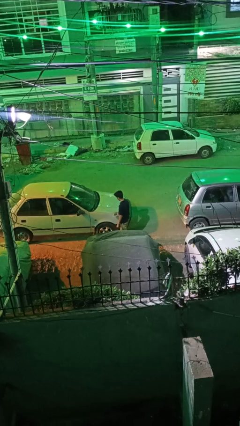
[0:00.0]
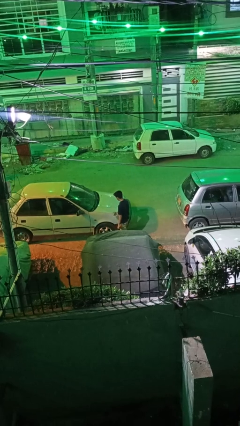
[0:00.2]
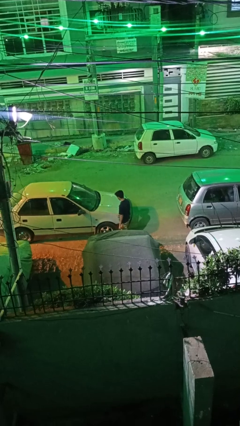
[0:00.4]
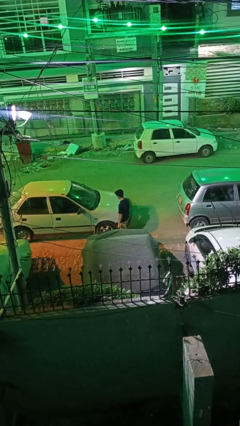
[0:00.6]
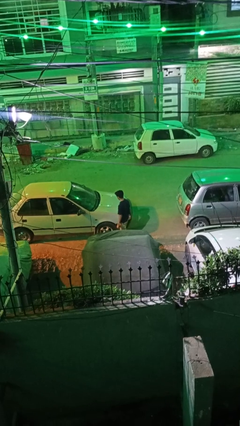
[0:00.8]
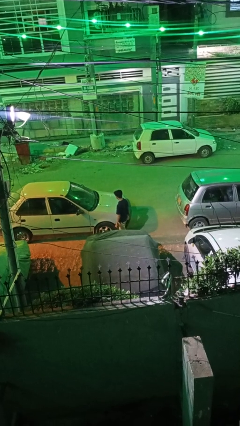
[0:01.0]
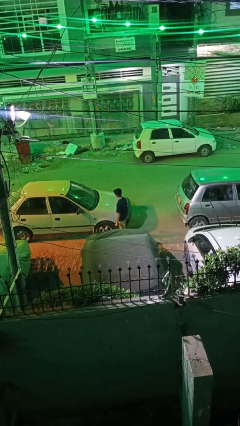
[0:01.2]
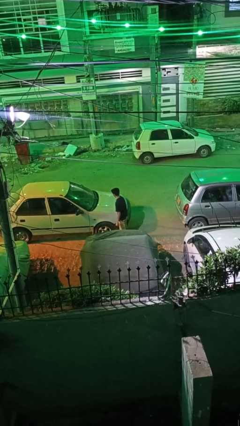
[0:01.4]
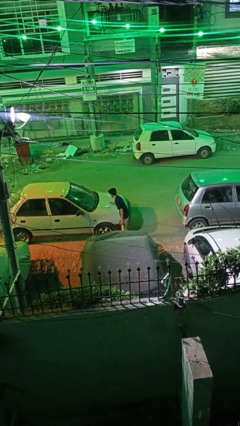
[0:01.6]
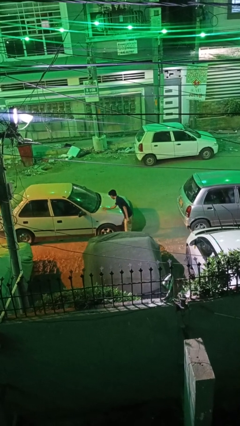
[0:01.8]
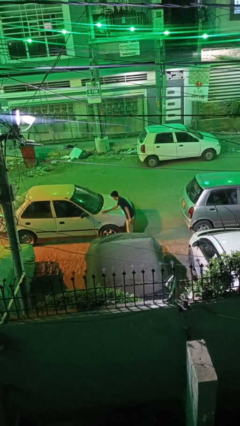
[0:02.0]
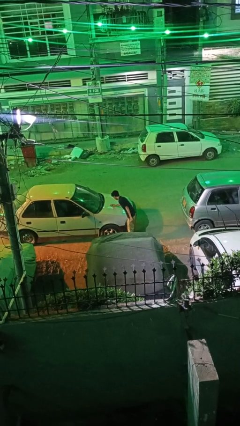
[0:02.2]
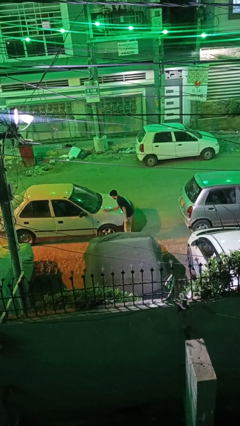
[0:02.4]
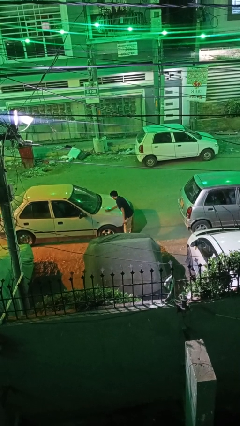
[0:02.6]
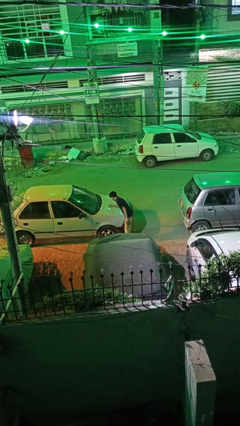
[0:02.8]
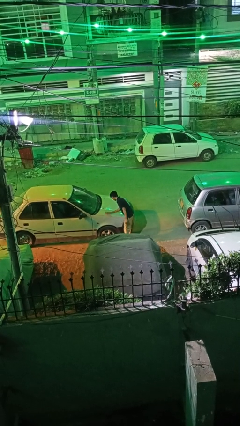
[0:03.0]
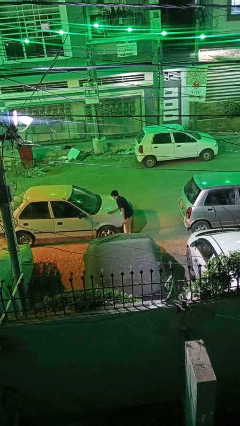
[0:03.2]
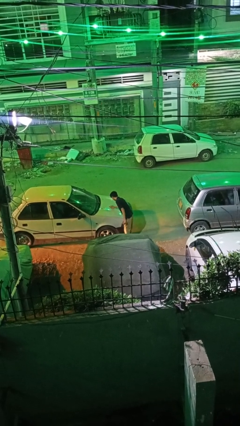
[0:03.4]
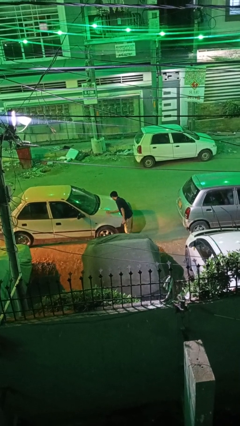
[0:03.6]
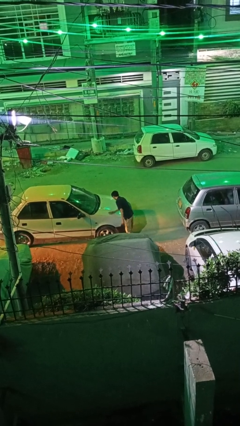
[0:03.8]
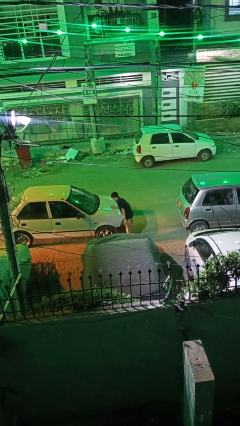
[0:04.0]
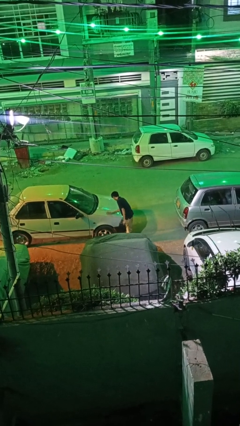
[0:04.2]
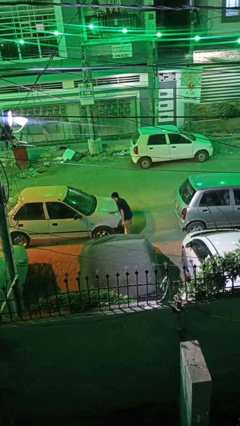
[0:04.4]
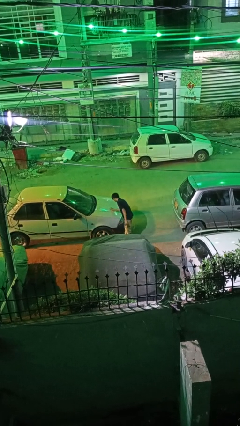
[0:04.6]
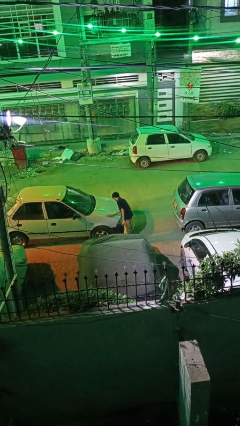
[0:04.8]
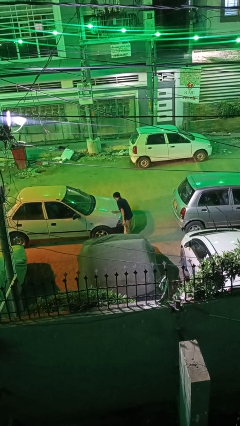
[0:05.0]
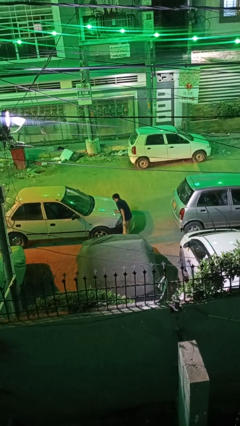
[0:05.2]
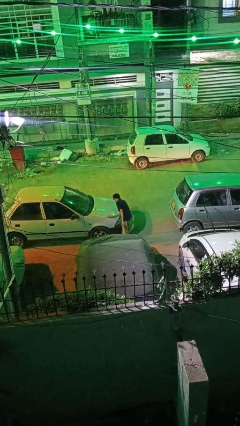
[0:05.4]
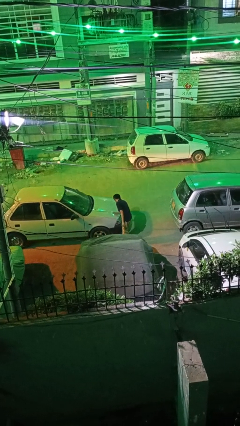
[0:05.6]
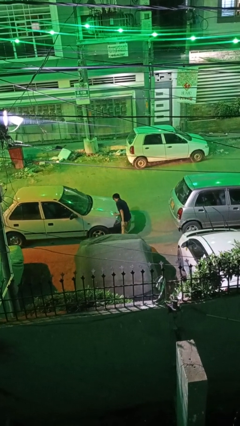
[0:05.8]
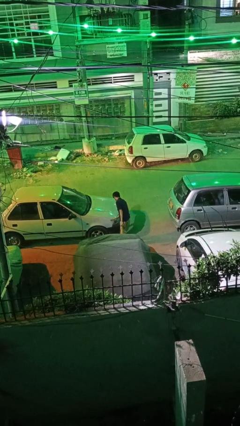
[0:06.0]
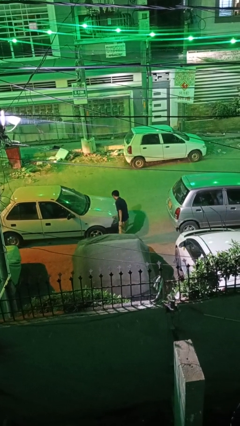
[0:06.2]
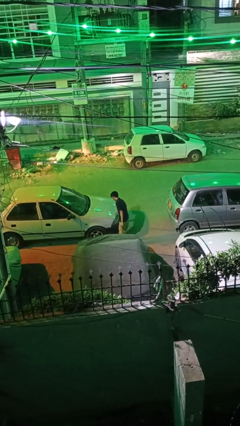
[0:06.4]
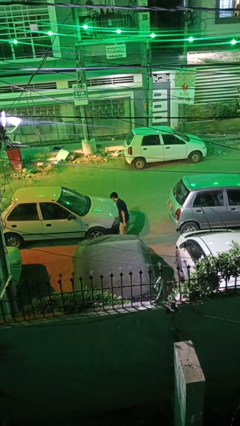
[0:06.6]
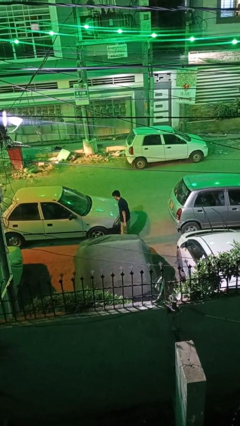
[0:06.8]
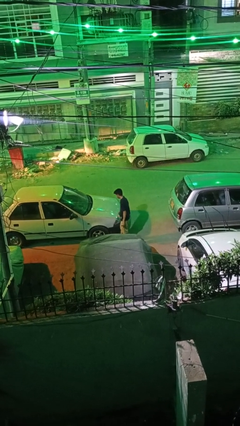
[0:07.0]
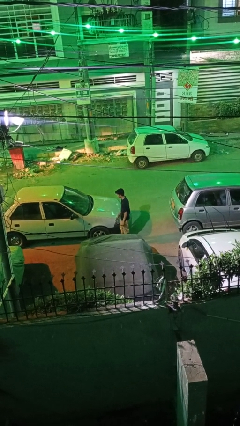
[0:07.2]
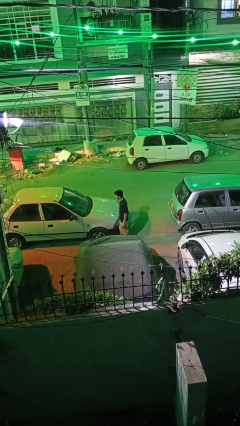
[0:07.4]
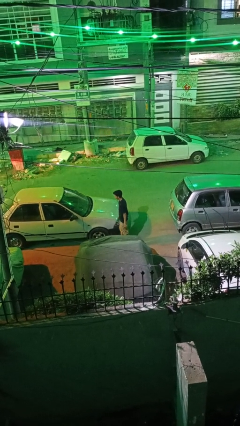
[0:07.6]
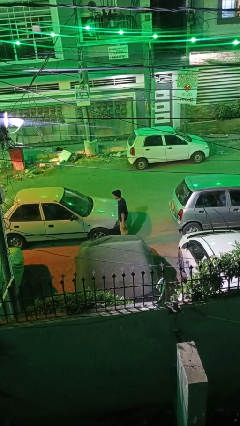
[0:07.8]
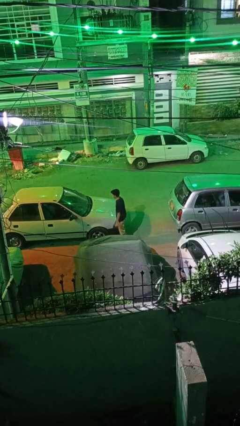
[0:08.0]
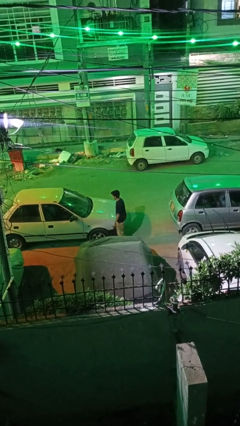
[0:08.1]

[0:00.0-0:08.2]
person polishes car with rag

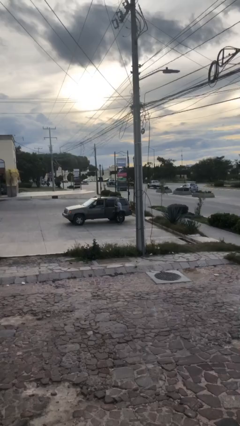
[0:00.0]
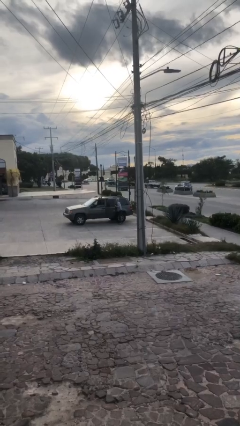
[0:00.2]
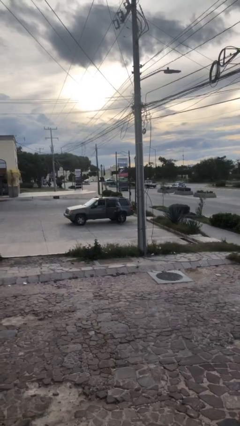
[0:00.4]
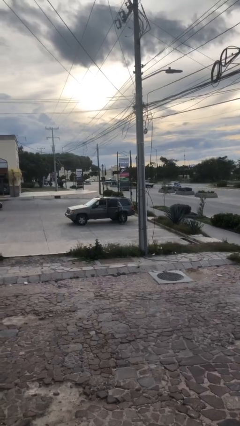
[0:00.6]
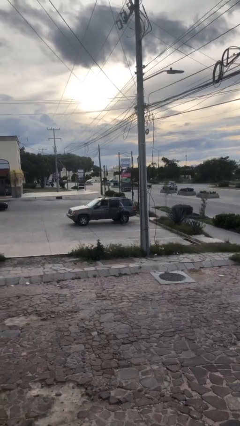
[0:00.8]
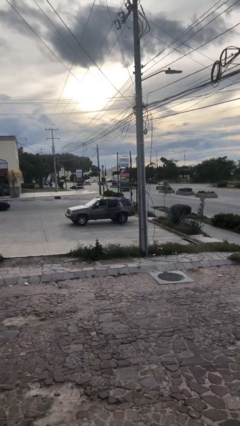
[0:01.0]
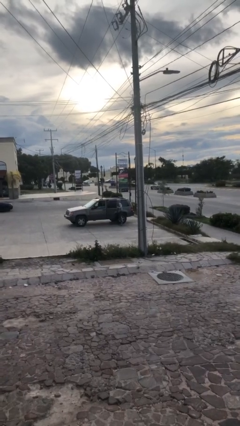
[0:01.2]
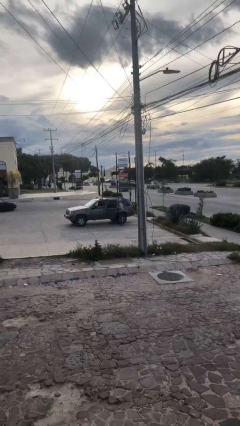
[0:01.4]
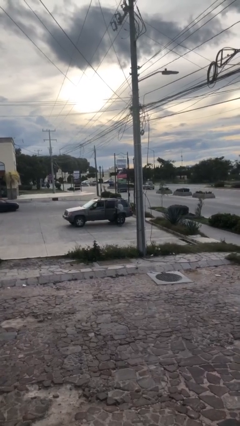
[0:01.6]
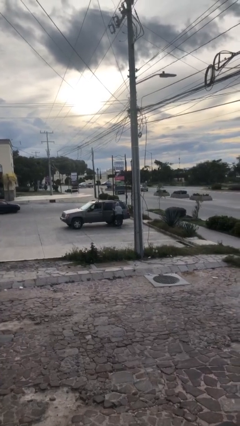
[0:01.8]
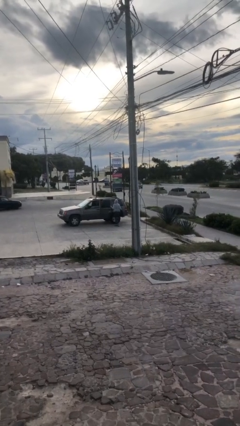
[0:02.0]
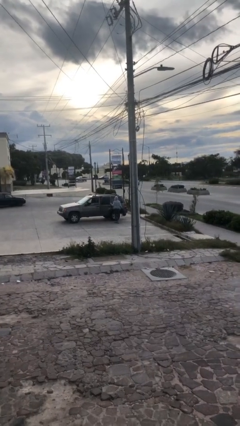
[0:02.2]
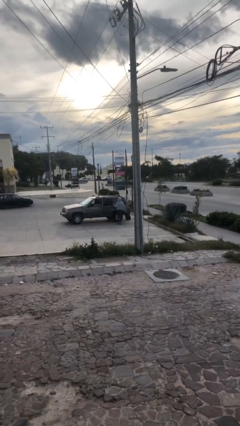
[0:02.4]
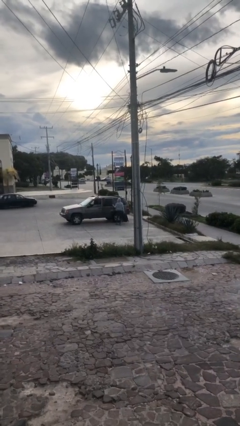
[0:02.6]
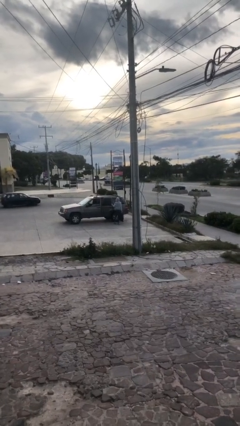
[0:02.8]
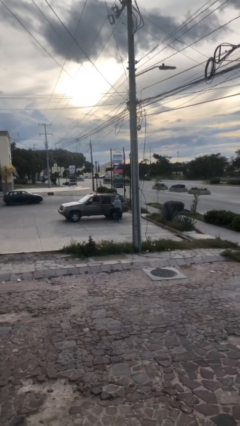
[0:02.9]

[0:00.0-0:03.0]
person unloads car

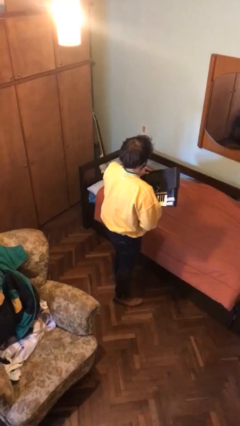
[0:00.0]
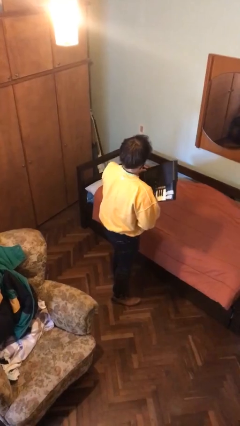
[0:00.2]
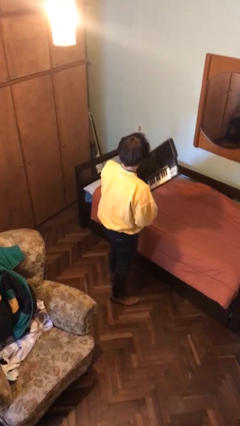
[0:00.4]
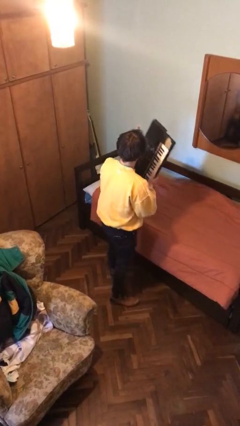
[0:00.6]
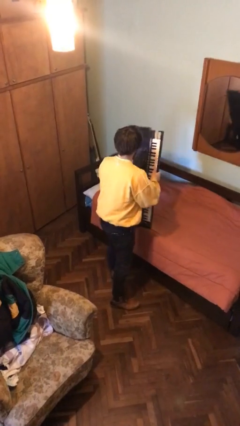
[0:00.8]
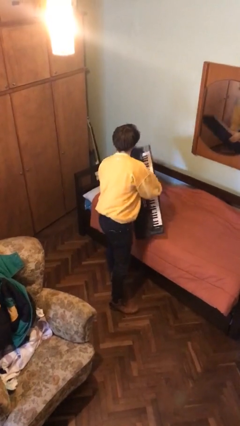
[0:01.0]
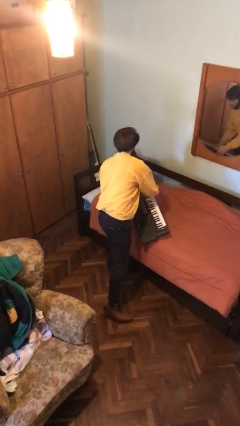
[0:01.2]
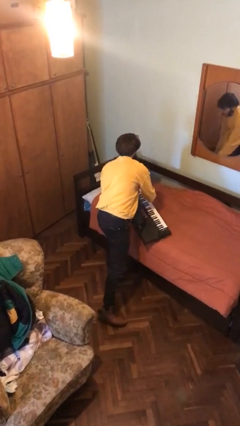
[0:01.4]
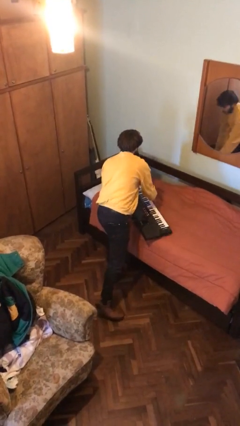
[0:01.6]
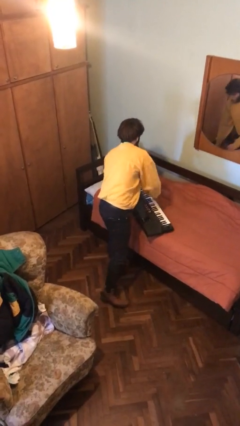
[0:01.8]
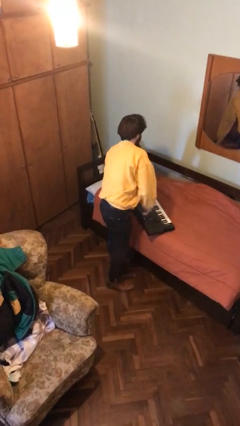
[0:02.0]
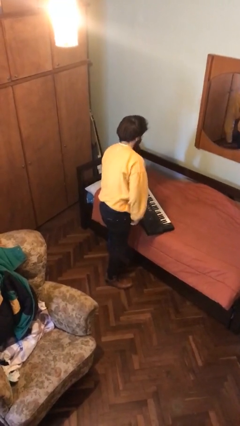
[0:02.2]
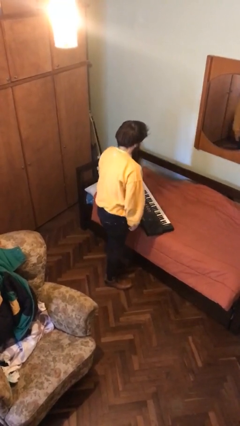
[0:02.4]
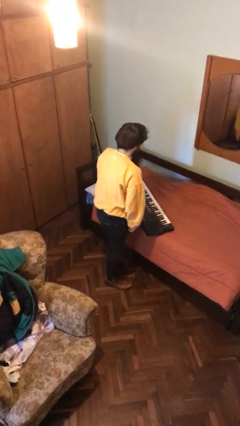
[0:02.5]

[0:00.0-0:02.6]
person puts down object on bed

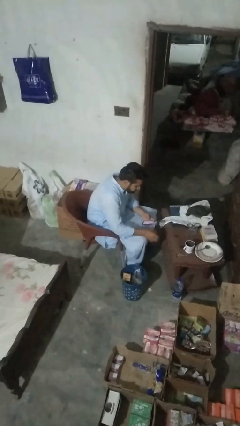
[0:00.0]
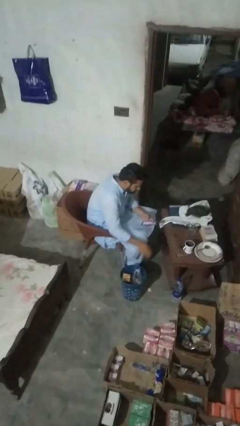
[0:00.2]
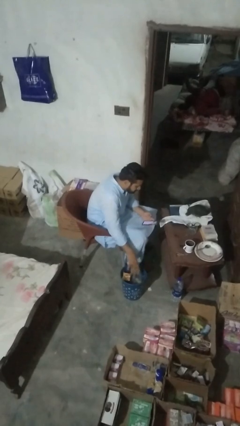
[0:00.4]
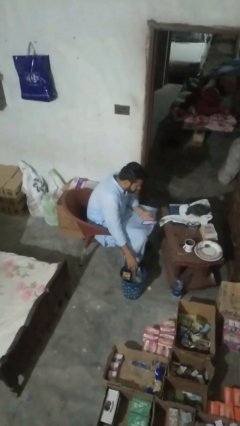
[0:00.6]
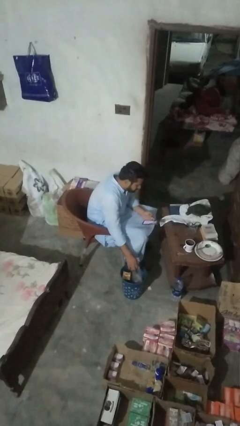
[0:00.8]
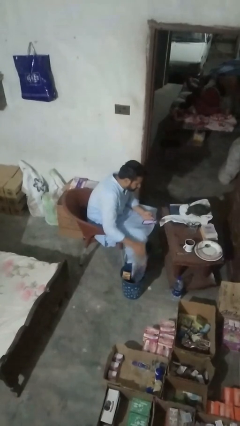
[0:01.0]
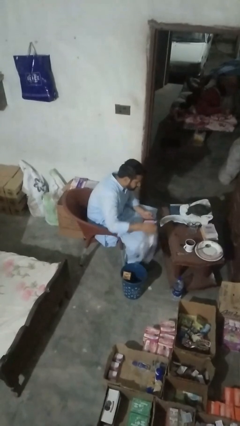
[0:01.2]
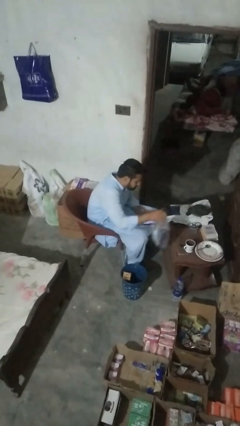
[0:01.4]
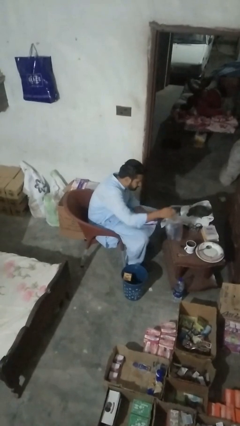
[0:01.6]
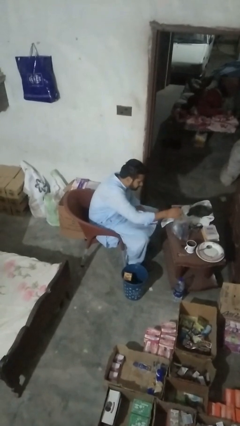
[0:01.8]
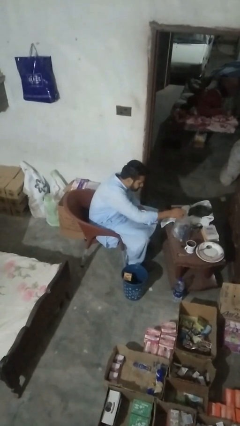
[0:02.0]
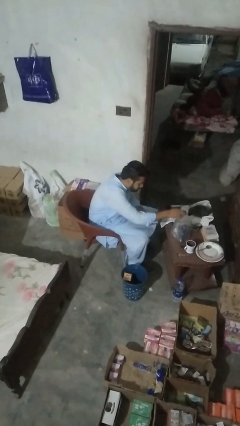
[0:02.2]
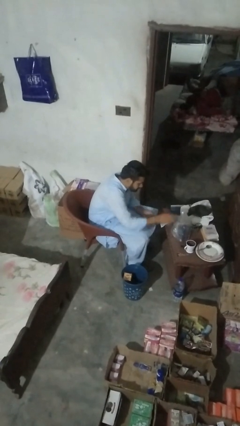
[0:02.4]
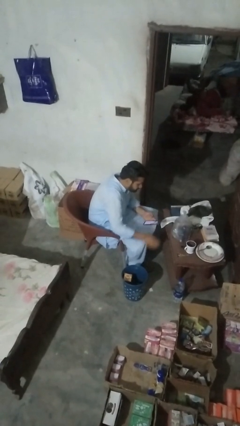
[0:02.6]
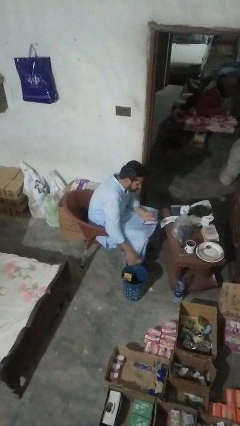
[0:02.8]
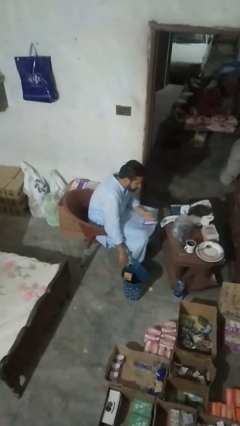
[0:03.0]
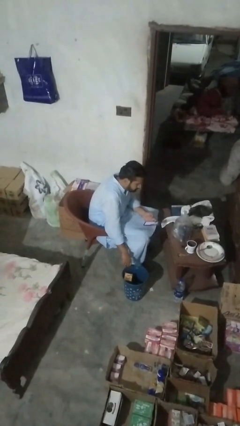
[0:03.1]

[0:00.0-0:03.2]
person inserts trashbag into trashcan

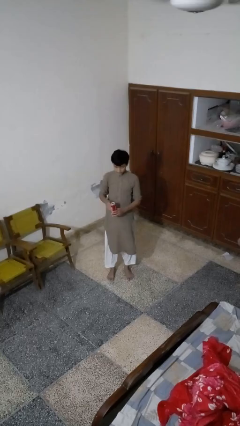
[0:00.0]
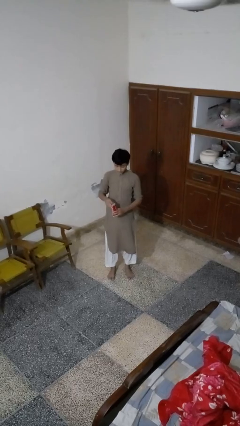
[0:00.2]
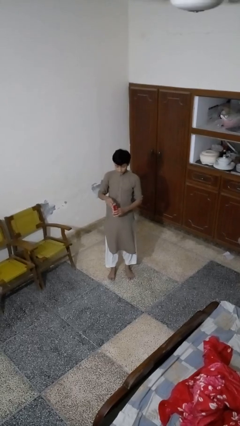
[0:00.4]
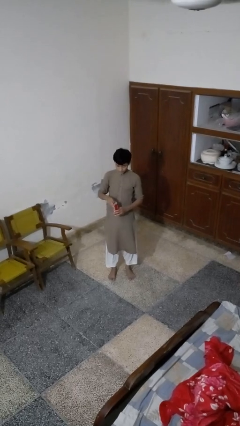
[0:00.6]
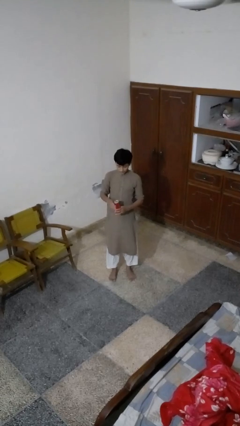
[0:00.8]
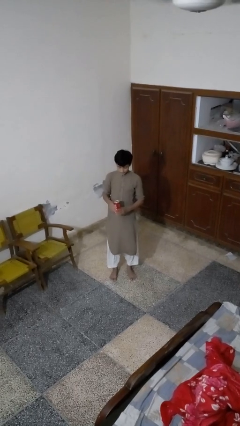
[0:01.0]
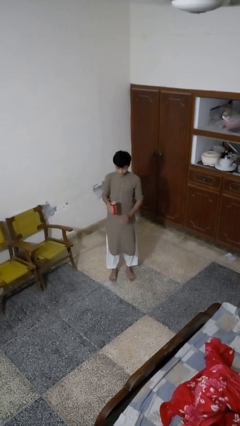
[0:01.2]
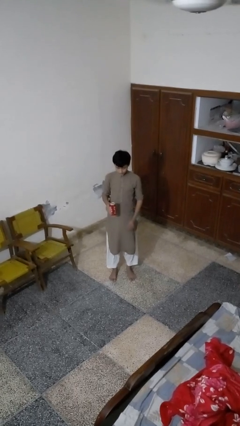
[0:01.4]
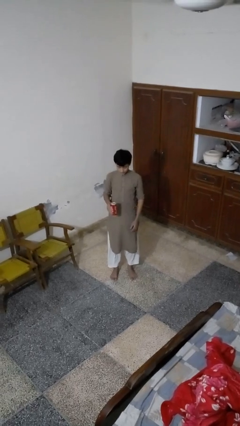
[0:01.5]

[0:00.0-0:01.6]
person opens beverage can
